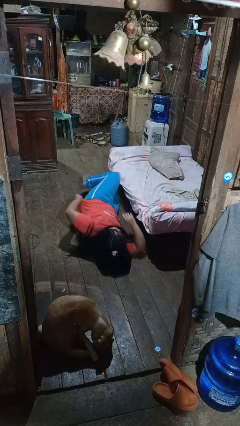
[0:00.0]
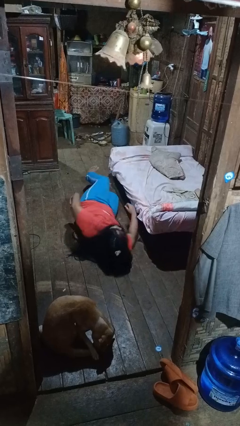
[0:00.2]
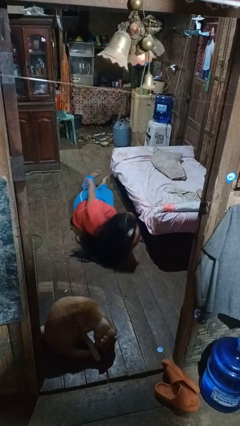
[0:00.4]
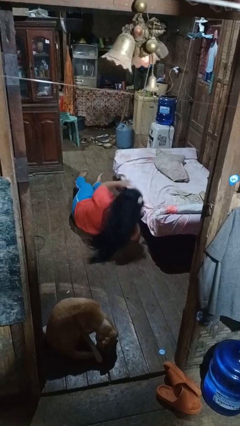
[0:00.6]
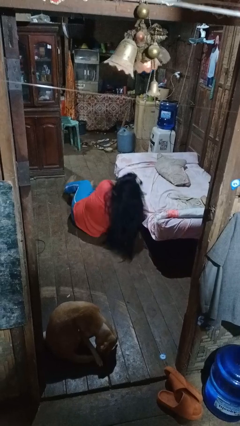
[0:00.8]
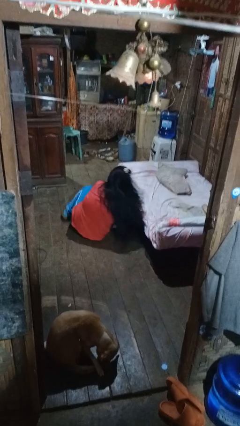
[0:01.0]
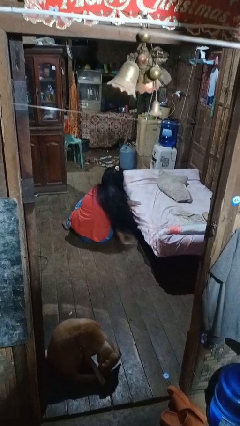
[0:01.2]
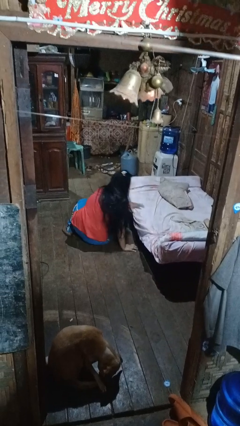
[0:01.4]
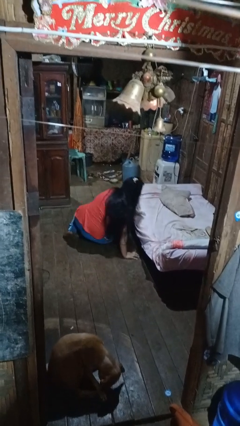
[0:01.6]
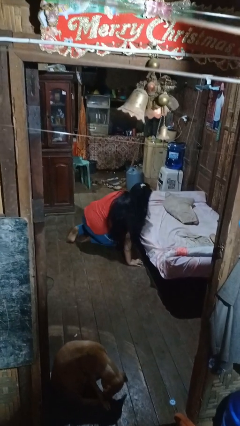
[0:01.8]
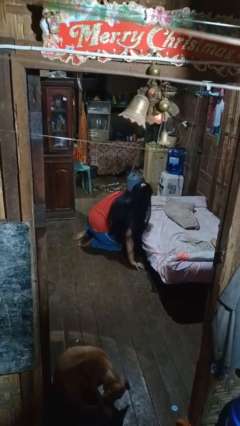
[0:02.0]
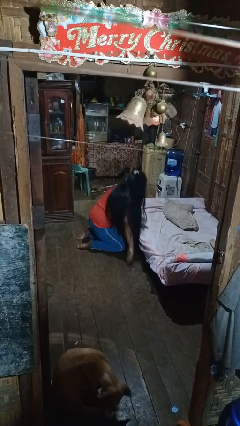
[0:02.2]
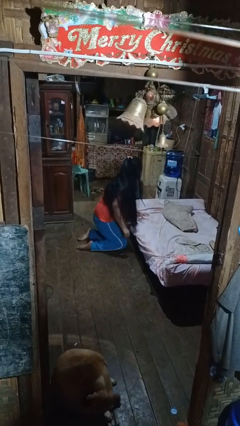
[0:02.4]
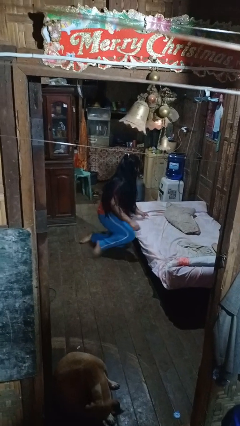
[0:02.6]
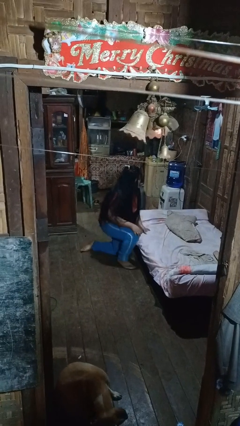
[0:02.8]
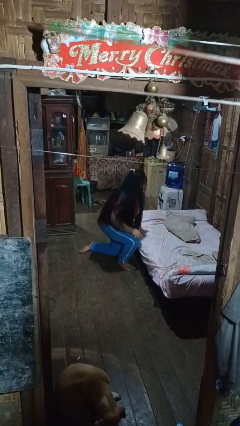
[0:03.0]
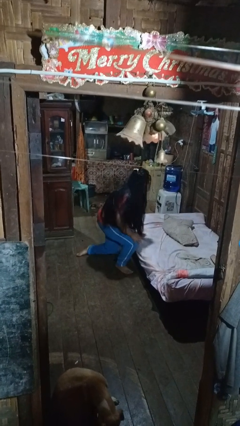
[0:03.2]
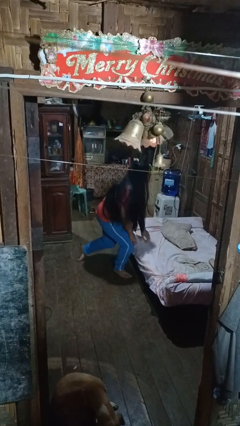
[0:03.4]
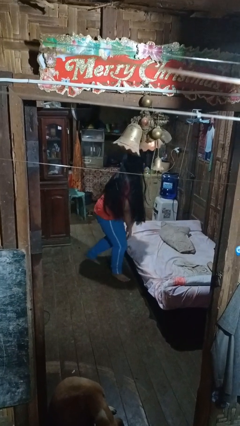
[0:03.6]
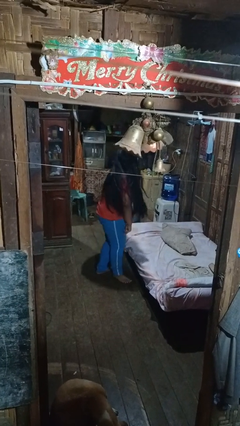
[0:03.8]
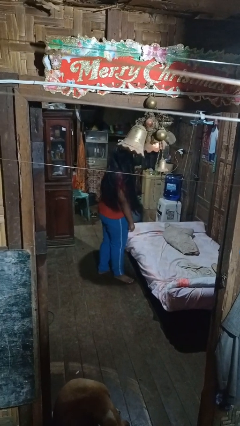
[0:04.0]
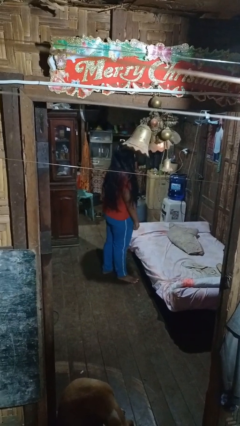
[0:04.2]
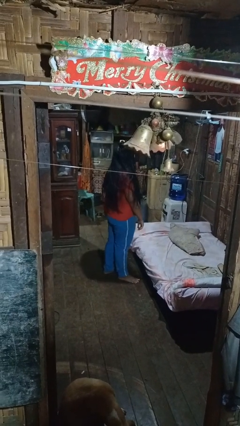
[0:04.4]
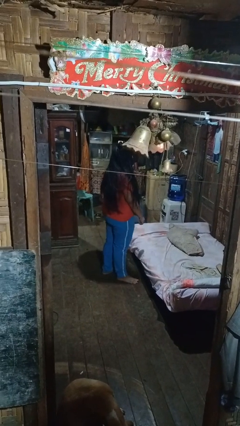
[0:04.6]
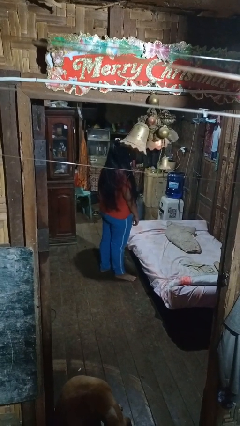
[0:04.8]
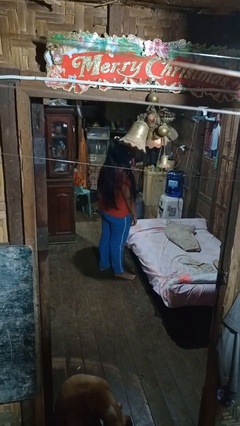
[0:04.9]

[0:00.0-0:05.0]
person stands up from floor

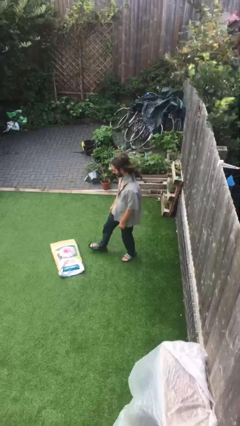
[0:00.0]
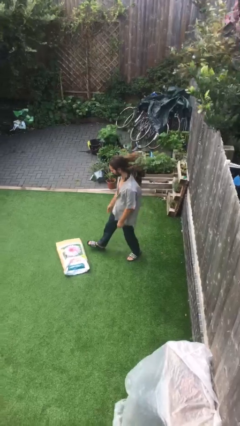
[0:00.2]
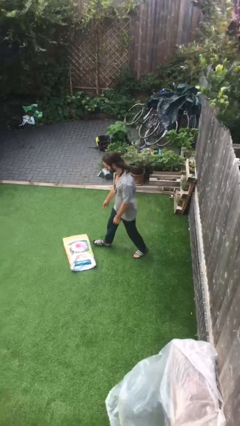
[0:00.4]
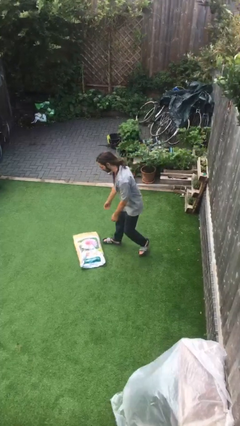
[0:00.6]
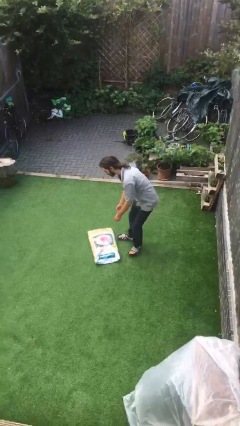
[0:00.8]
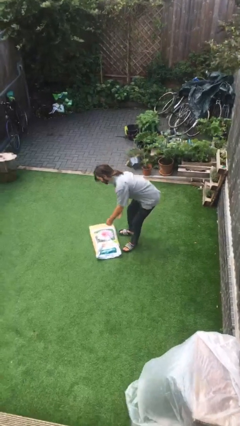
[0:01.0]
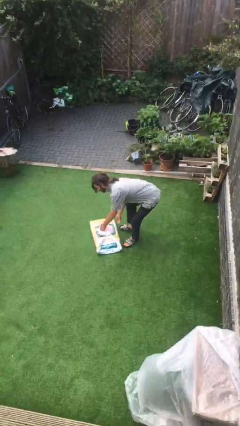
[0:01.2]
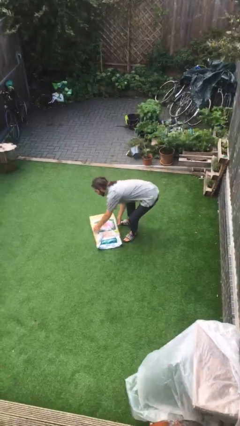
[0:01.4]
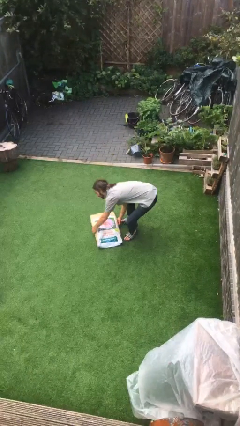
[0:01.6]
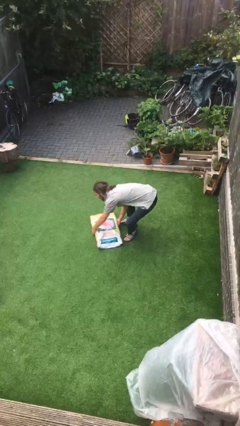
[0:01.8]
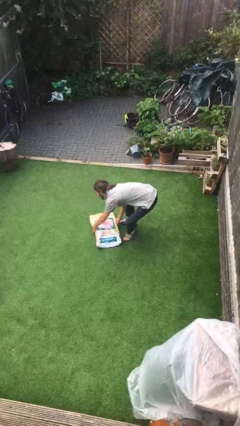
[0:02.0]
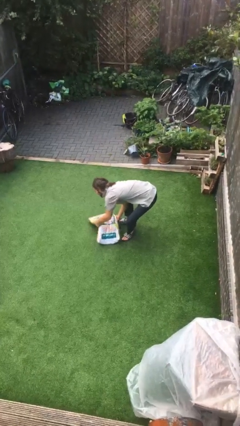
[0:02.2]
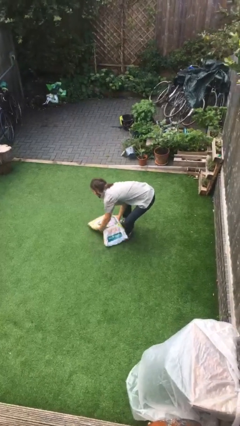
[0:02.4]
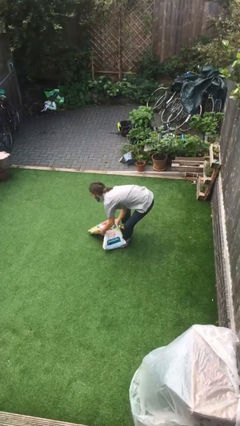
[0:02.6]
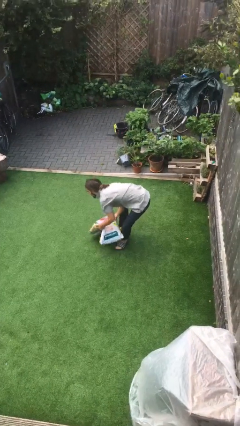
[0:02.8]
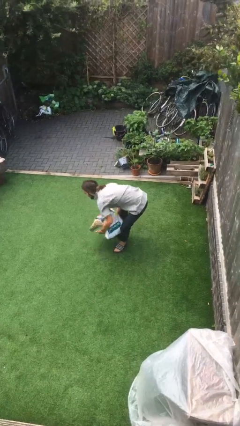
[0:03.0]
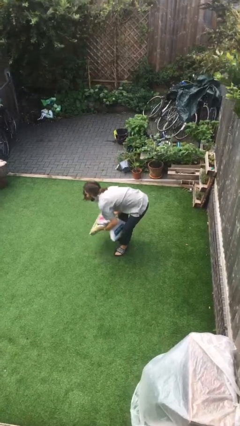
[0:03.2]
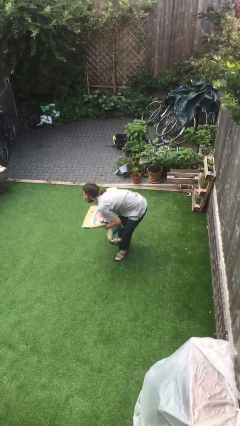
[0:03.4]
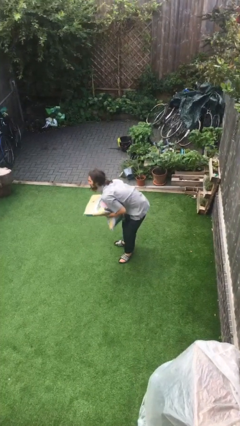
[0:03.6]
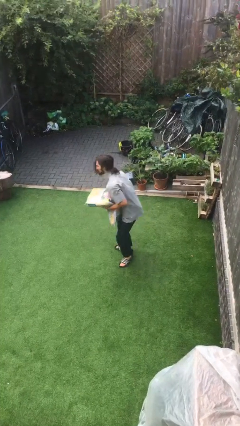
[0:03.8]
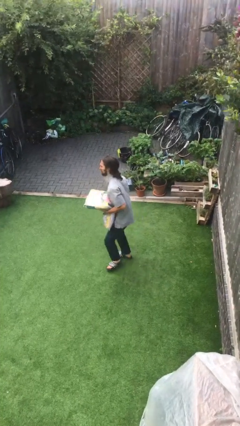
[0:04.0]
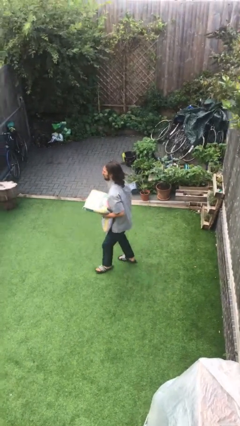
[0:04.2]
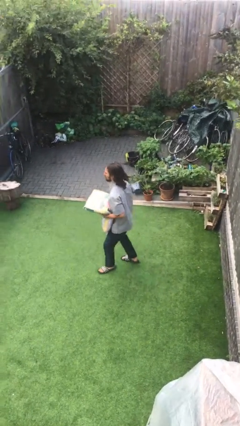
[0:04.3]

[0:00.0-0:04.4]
person picks up object from floor

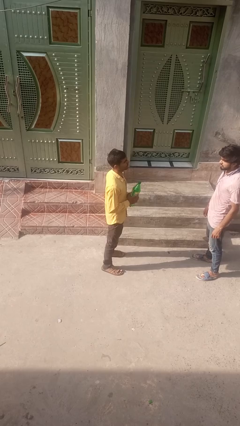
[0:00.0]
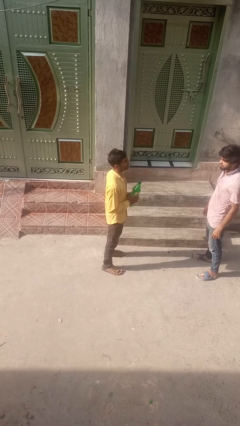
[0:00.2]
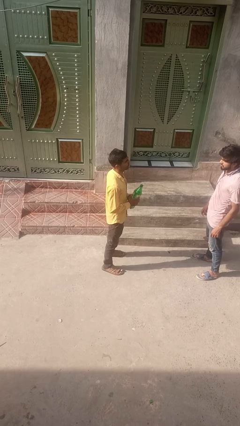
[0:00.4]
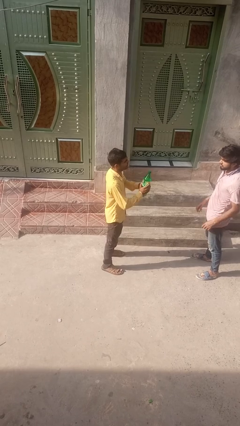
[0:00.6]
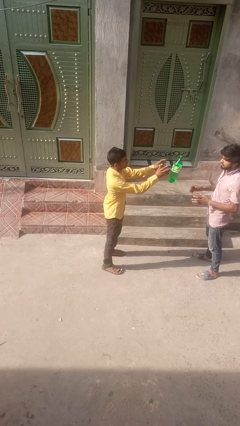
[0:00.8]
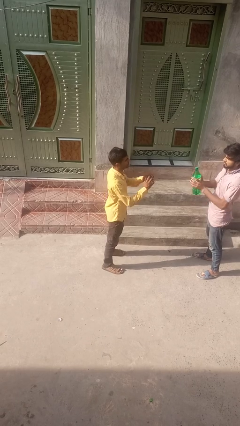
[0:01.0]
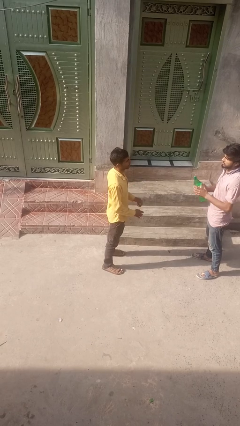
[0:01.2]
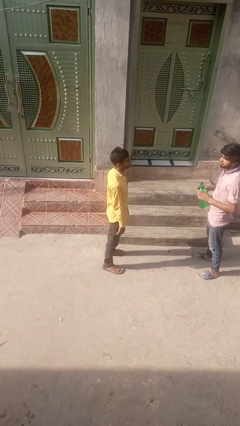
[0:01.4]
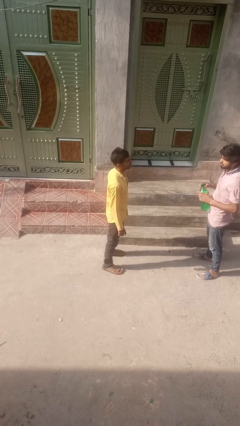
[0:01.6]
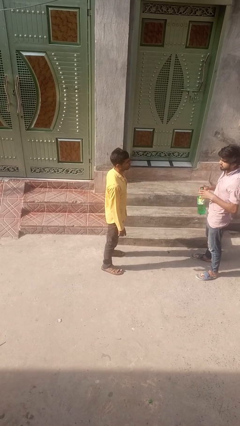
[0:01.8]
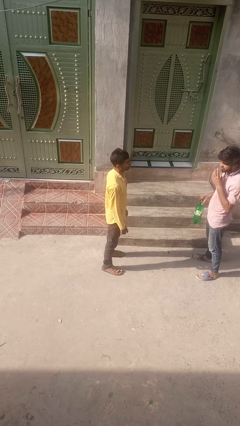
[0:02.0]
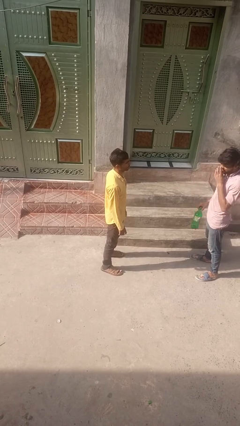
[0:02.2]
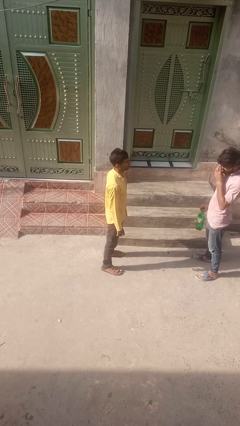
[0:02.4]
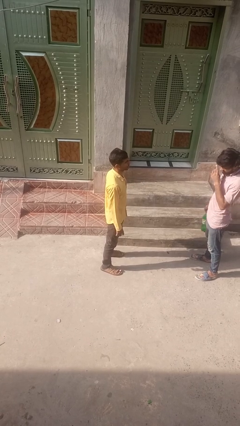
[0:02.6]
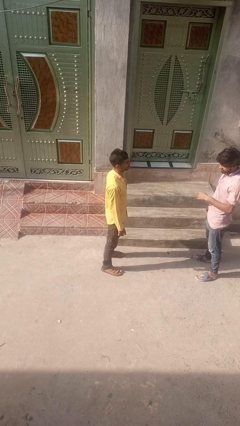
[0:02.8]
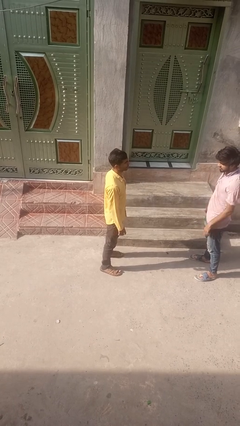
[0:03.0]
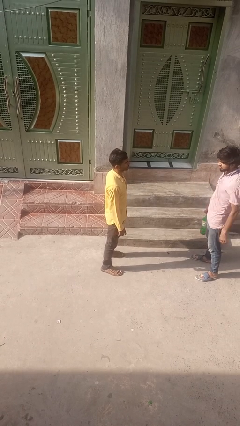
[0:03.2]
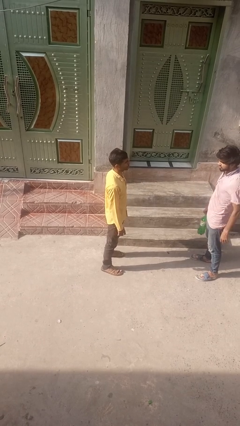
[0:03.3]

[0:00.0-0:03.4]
person throws object to person

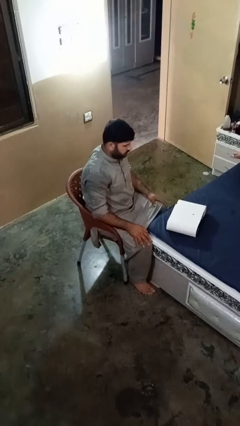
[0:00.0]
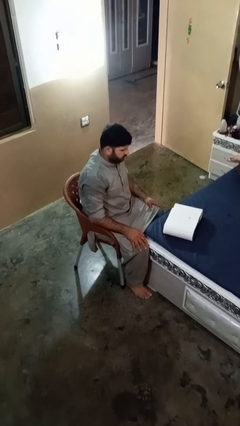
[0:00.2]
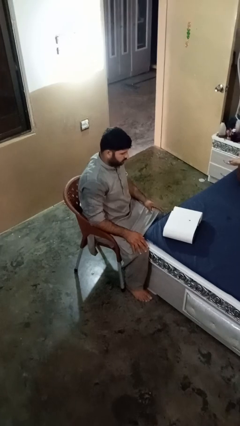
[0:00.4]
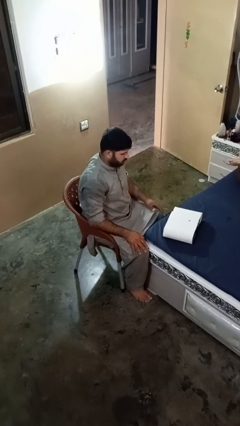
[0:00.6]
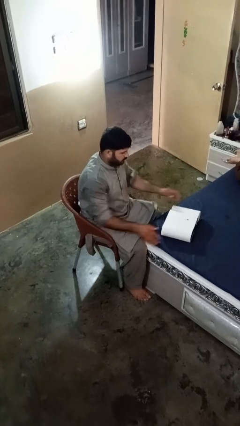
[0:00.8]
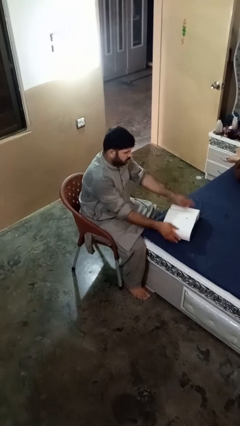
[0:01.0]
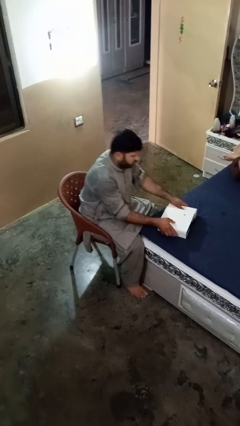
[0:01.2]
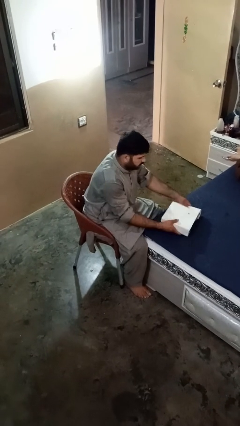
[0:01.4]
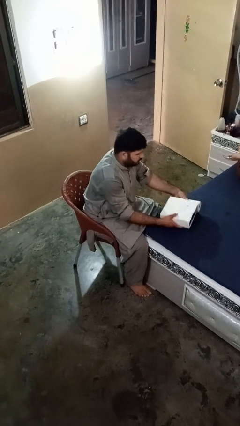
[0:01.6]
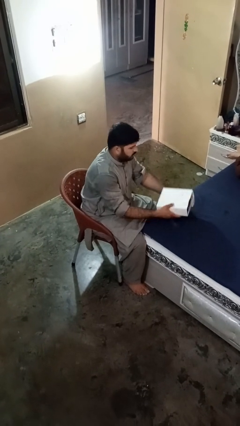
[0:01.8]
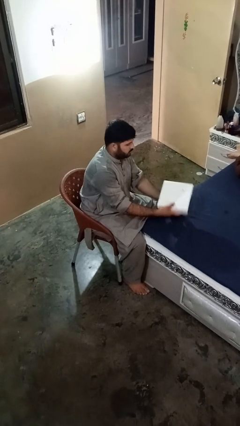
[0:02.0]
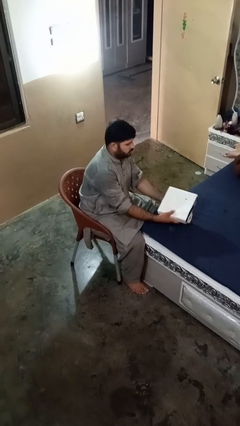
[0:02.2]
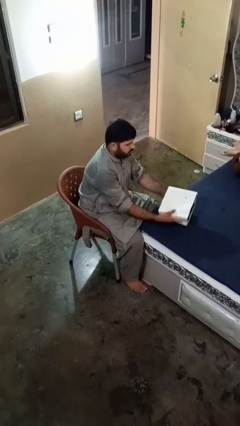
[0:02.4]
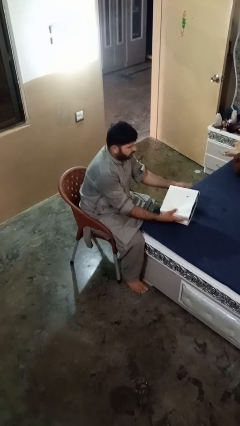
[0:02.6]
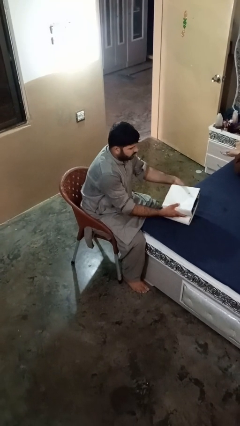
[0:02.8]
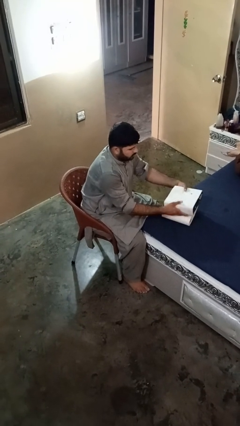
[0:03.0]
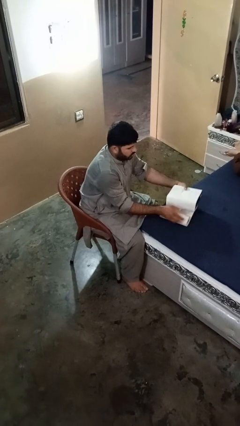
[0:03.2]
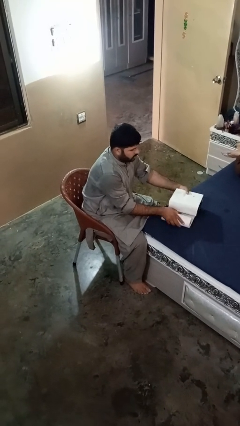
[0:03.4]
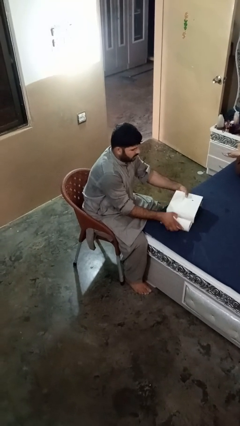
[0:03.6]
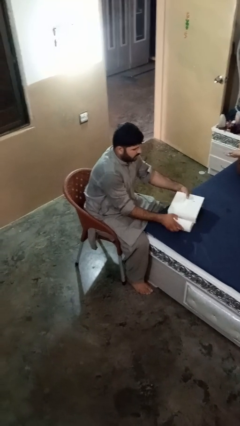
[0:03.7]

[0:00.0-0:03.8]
person wraps box

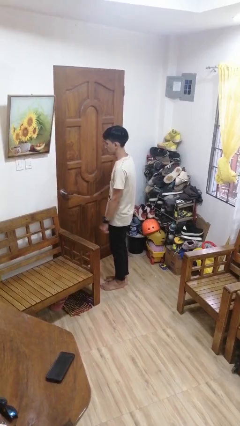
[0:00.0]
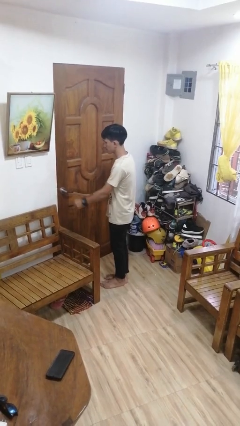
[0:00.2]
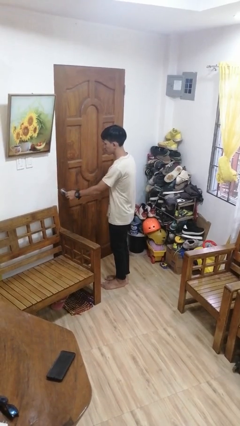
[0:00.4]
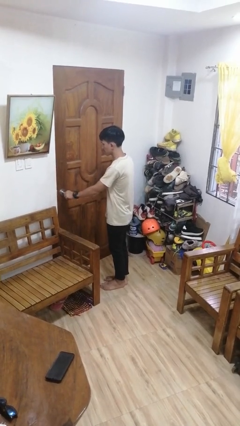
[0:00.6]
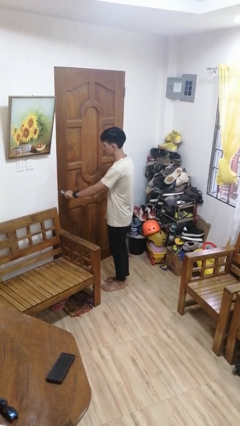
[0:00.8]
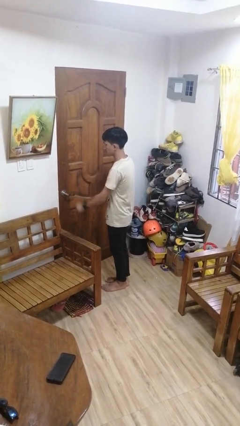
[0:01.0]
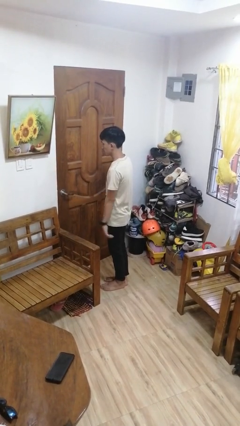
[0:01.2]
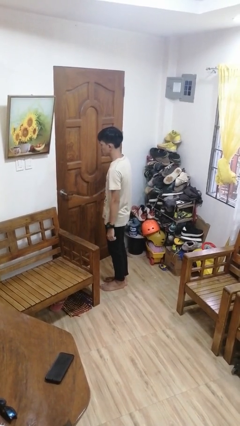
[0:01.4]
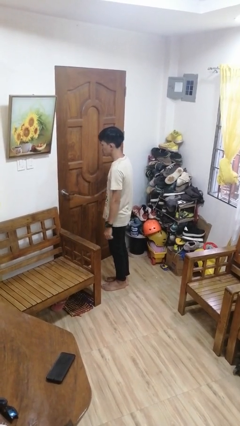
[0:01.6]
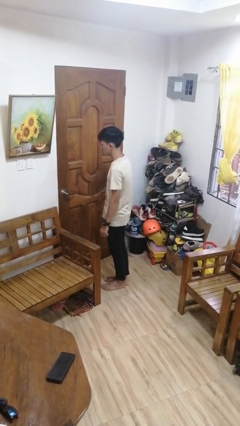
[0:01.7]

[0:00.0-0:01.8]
person unlocks door with keys
